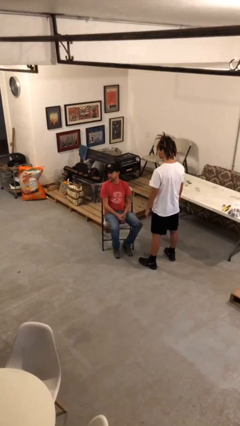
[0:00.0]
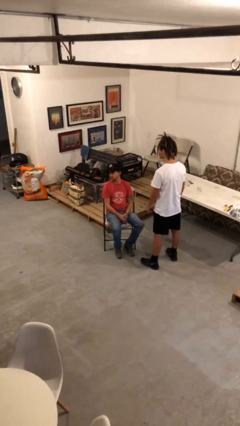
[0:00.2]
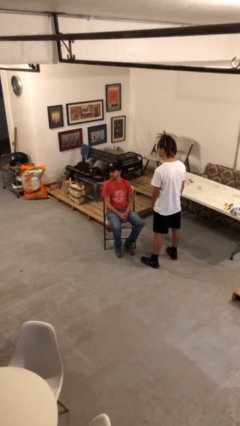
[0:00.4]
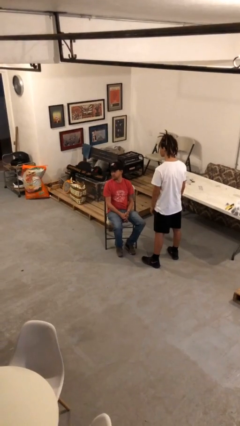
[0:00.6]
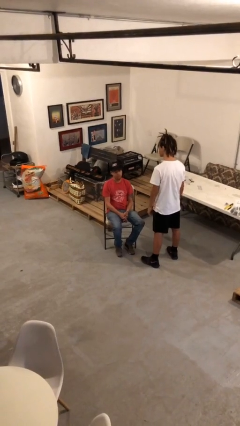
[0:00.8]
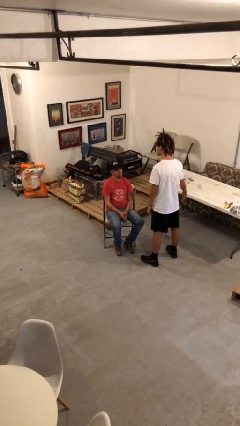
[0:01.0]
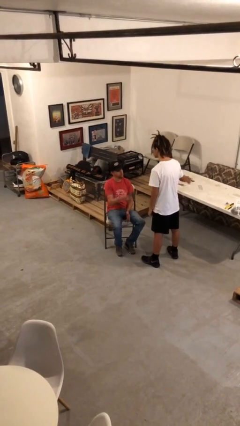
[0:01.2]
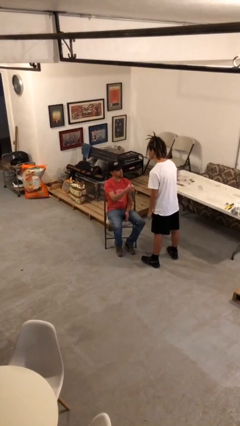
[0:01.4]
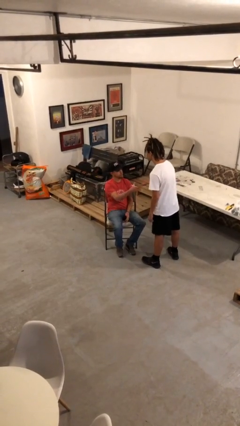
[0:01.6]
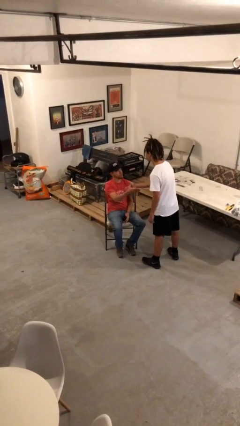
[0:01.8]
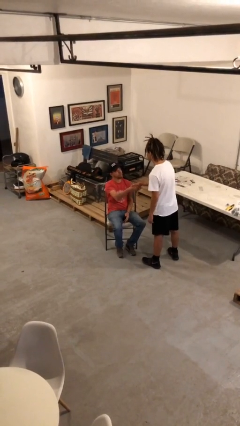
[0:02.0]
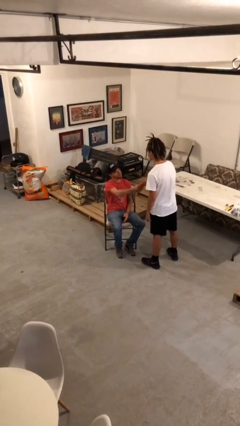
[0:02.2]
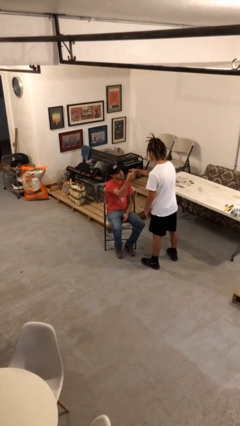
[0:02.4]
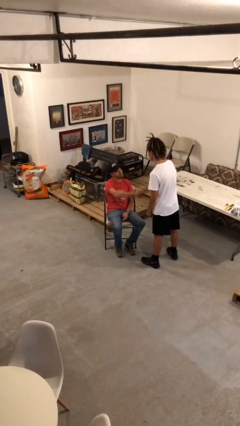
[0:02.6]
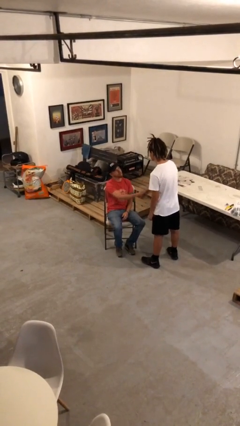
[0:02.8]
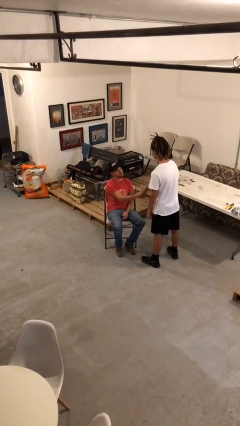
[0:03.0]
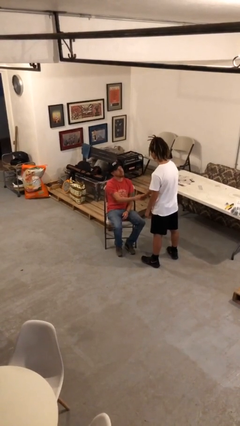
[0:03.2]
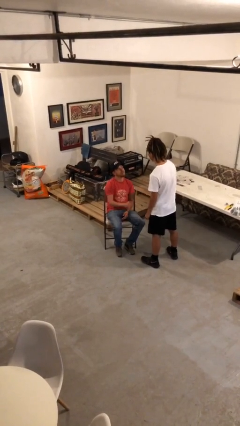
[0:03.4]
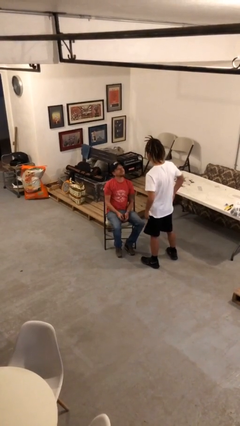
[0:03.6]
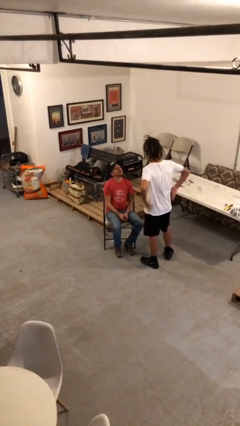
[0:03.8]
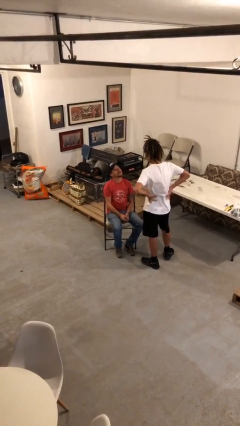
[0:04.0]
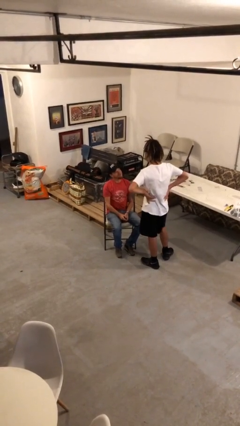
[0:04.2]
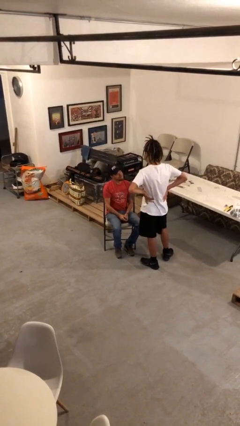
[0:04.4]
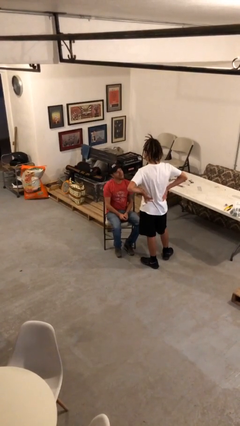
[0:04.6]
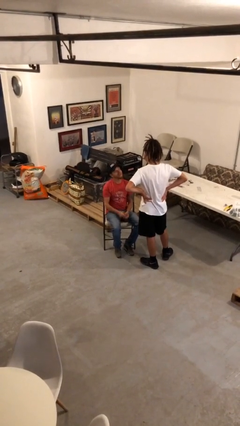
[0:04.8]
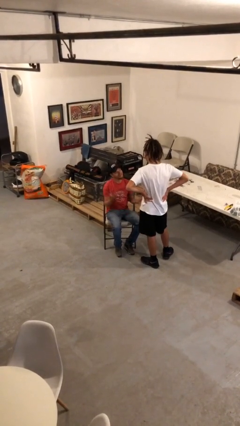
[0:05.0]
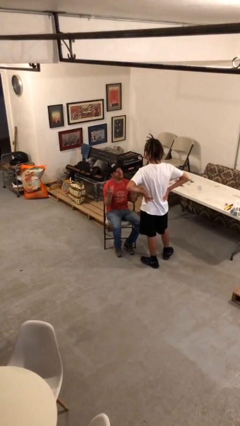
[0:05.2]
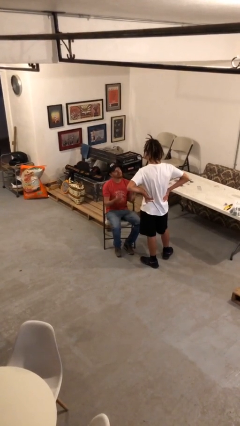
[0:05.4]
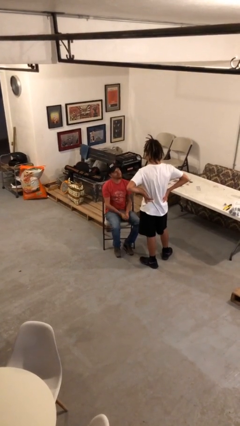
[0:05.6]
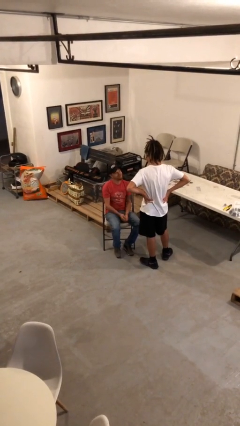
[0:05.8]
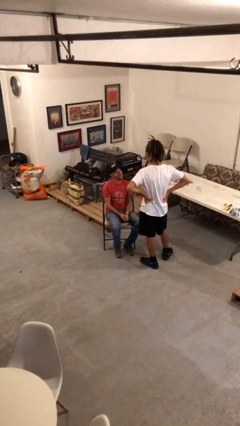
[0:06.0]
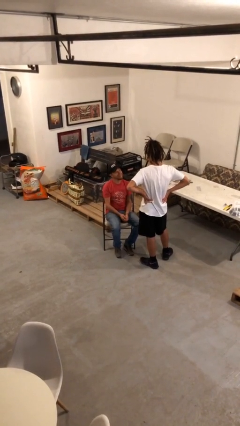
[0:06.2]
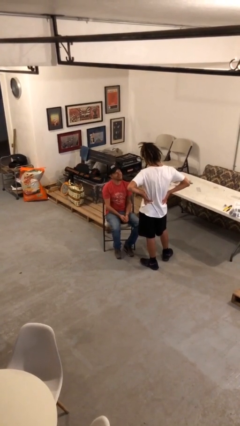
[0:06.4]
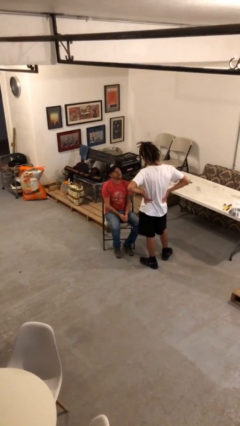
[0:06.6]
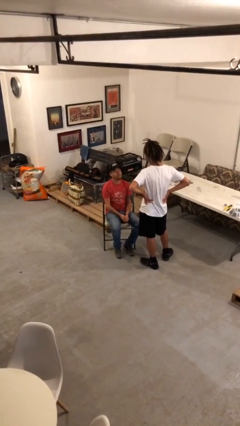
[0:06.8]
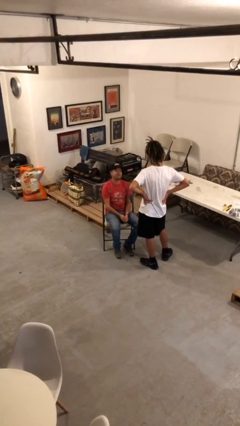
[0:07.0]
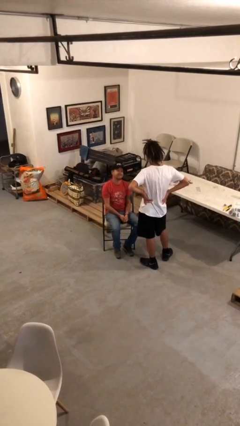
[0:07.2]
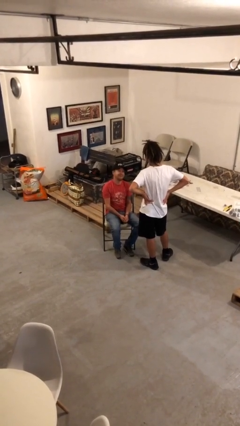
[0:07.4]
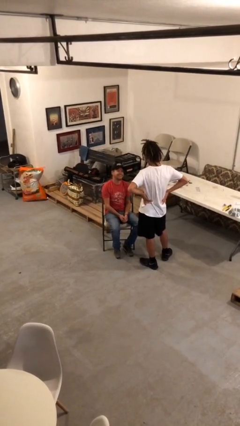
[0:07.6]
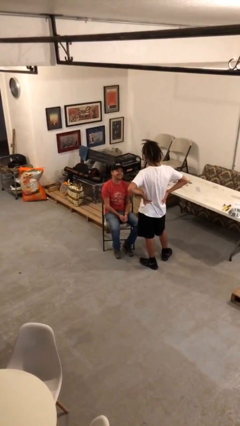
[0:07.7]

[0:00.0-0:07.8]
person shakes hand

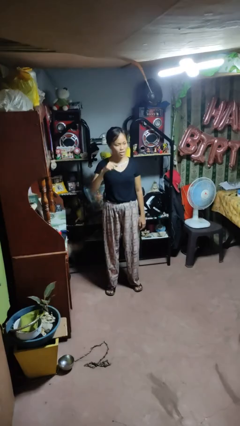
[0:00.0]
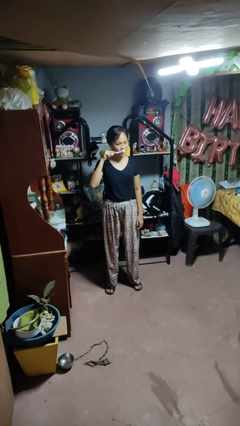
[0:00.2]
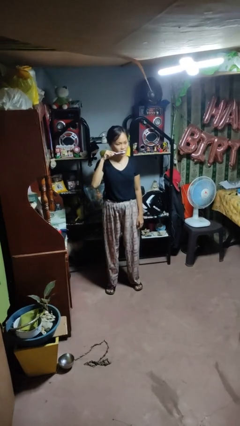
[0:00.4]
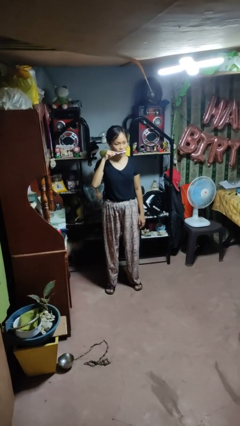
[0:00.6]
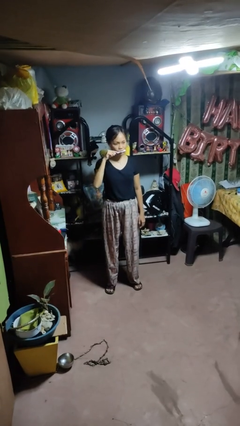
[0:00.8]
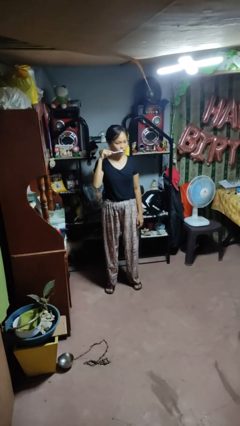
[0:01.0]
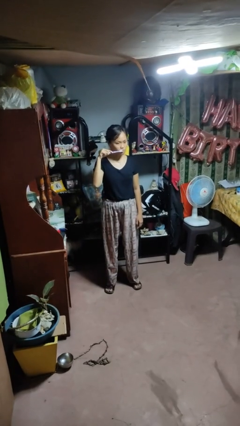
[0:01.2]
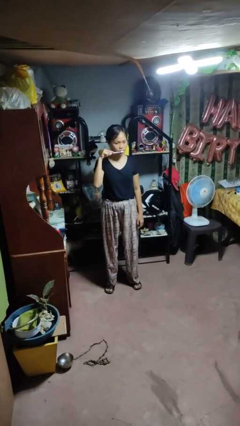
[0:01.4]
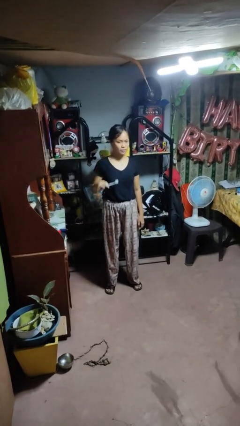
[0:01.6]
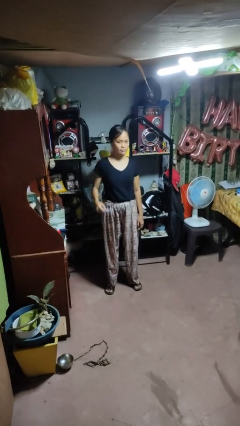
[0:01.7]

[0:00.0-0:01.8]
person brushes teeth

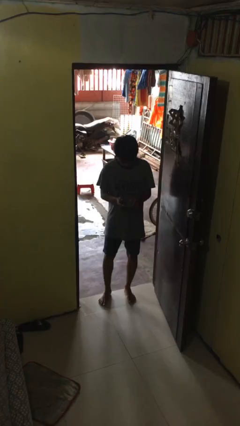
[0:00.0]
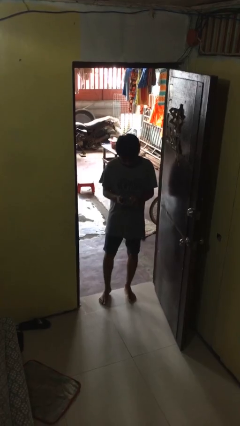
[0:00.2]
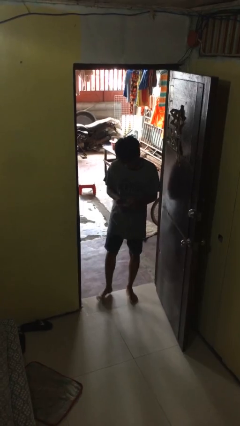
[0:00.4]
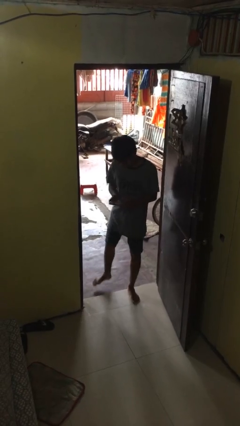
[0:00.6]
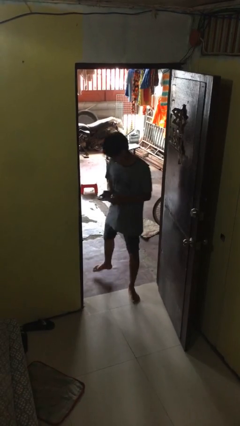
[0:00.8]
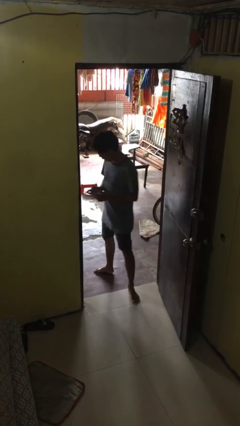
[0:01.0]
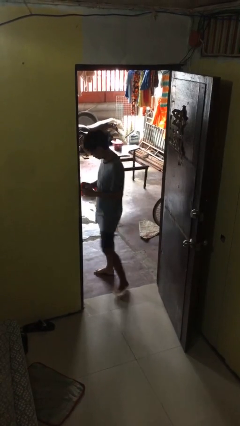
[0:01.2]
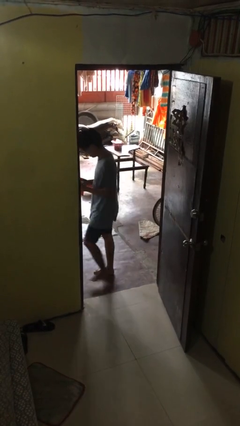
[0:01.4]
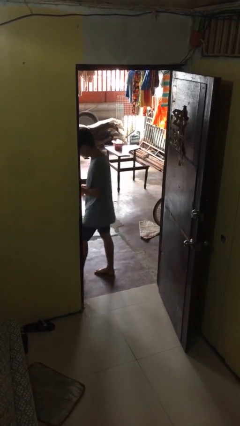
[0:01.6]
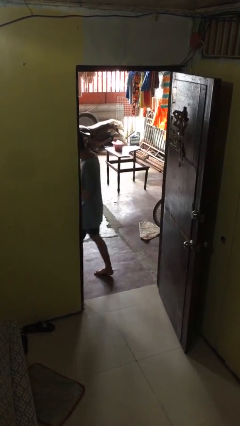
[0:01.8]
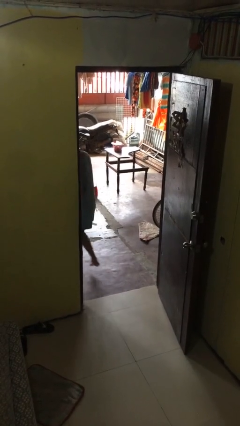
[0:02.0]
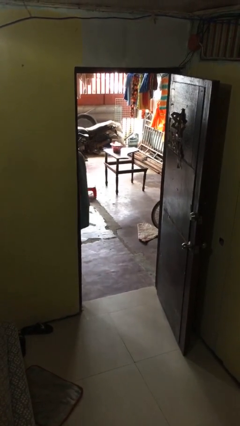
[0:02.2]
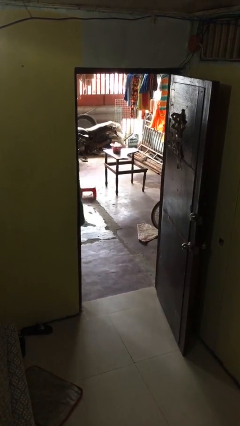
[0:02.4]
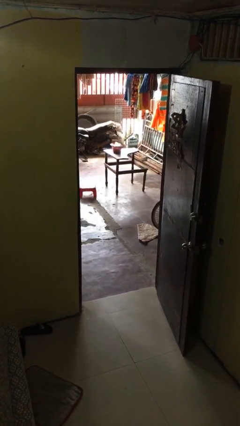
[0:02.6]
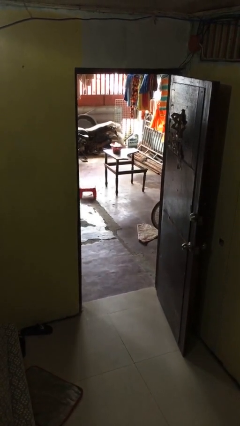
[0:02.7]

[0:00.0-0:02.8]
person exits scene through structure

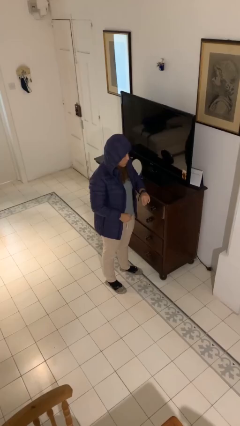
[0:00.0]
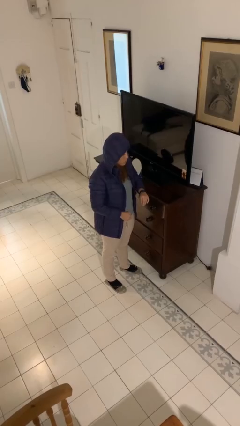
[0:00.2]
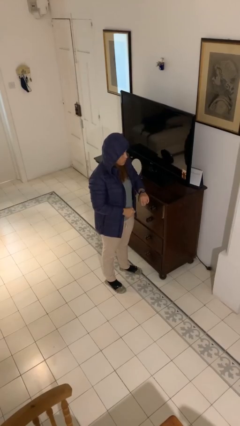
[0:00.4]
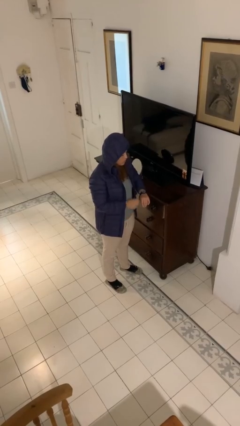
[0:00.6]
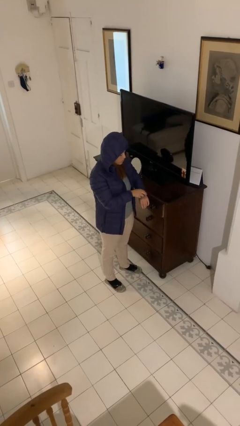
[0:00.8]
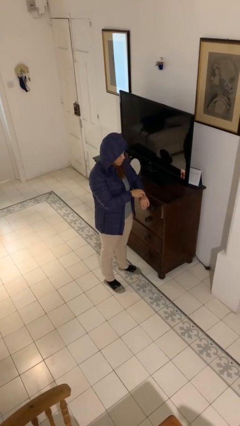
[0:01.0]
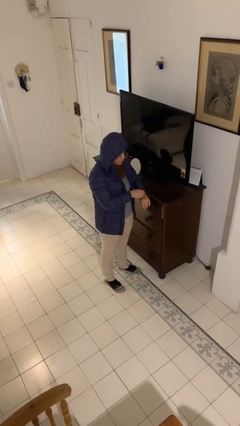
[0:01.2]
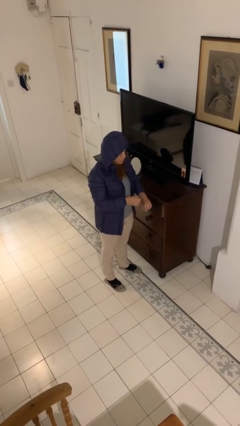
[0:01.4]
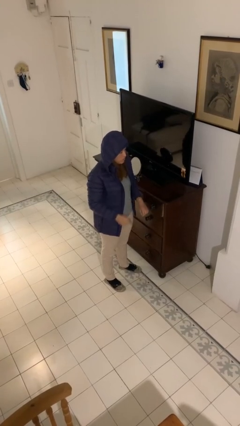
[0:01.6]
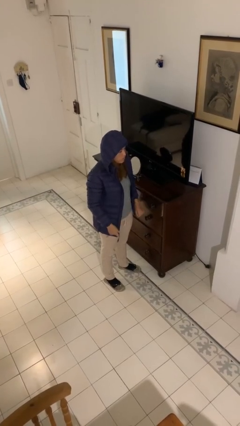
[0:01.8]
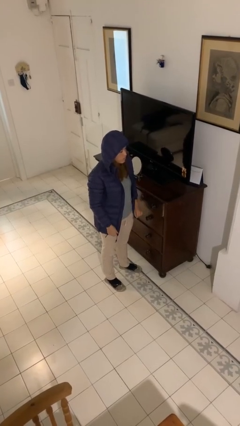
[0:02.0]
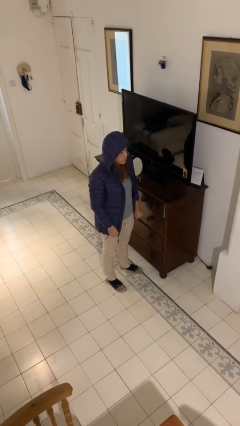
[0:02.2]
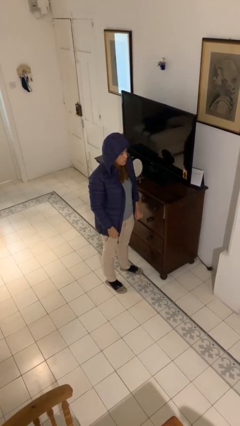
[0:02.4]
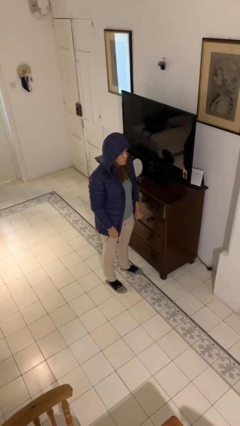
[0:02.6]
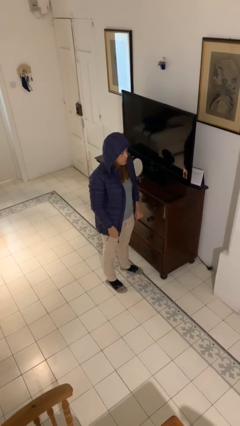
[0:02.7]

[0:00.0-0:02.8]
person takes off wristwatch

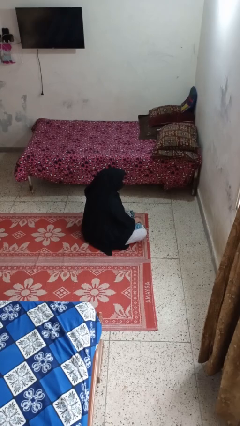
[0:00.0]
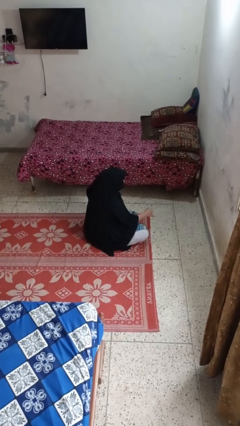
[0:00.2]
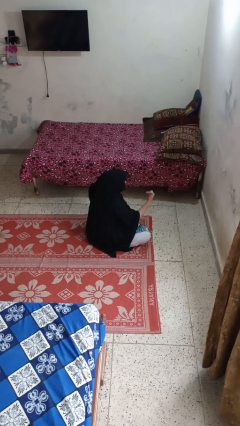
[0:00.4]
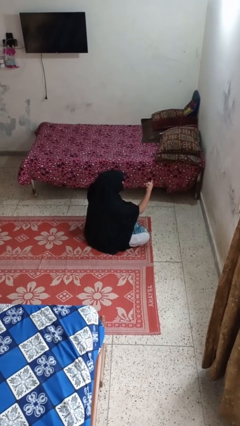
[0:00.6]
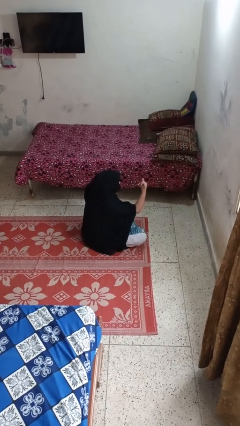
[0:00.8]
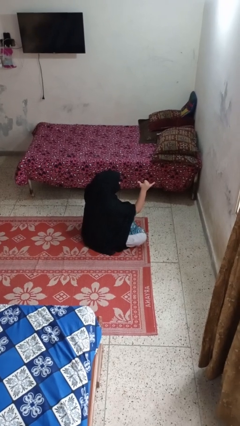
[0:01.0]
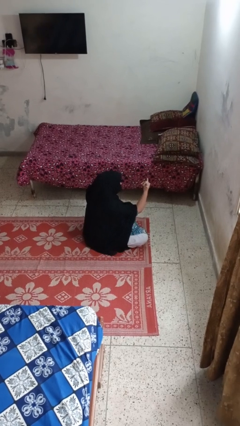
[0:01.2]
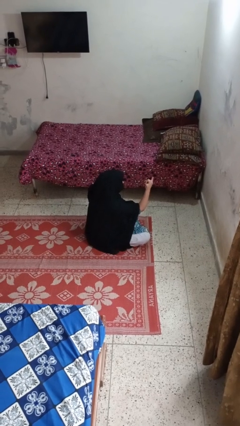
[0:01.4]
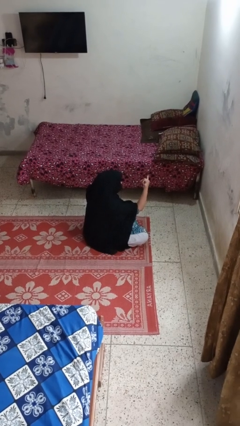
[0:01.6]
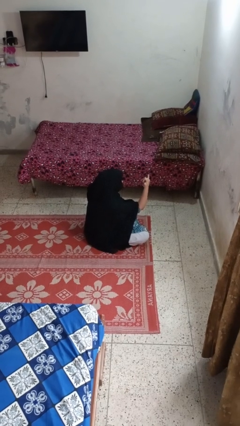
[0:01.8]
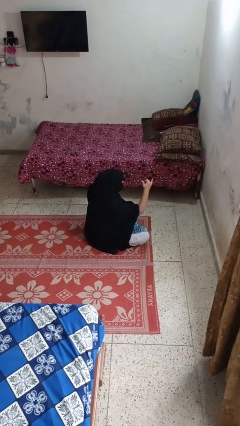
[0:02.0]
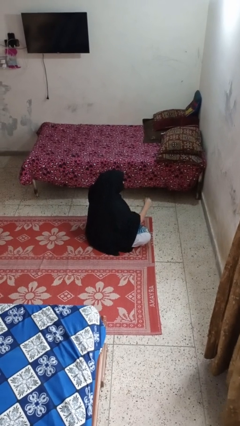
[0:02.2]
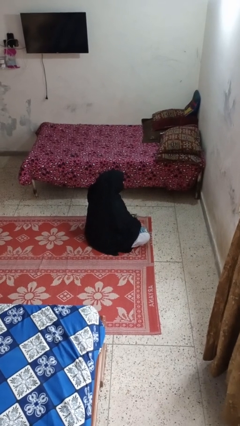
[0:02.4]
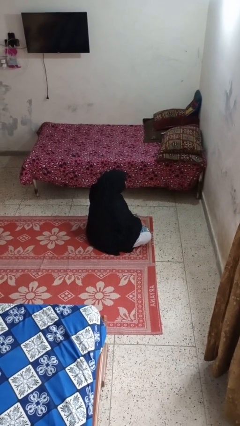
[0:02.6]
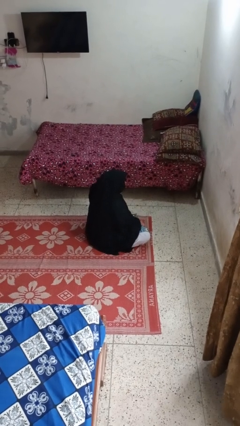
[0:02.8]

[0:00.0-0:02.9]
person gestures hang loose
